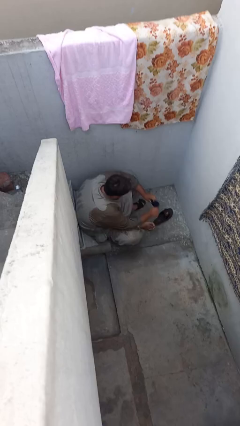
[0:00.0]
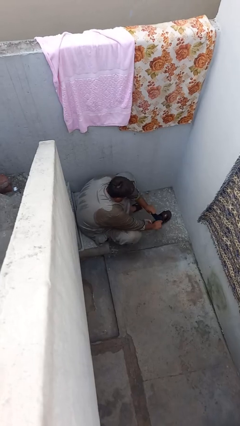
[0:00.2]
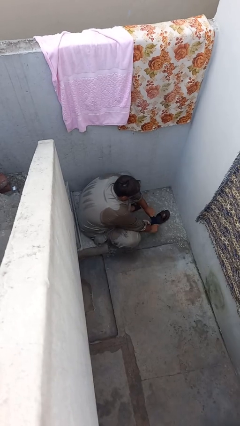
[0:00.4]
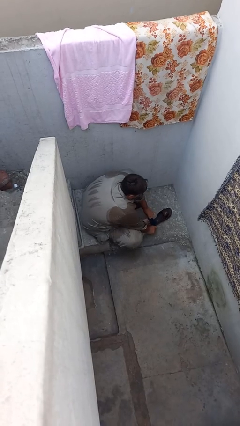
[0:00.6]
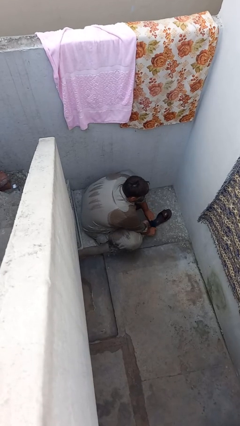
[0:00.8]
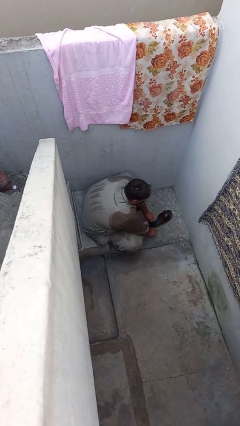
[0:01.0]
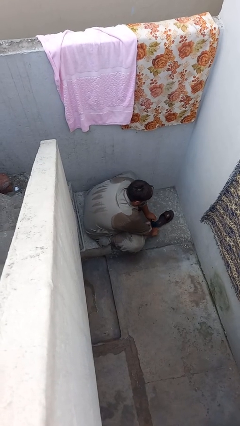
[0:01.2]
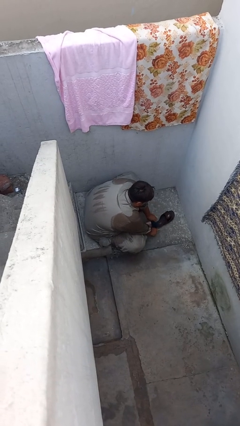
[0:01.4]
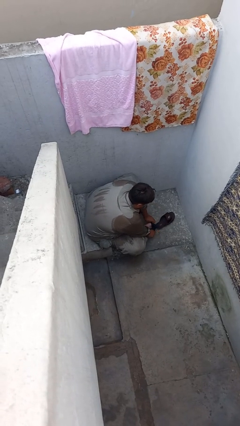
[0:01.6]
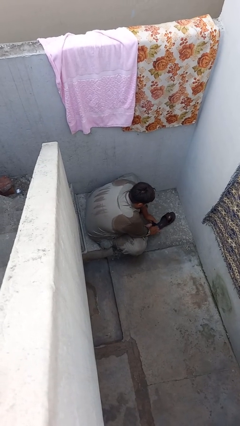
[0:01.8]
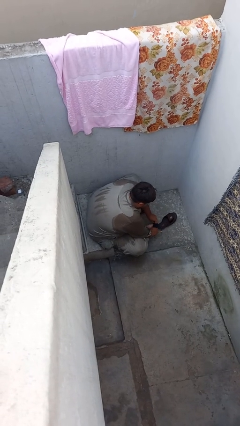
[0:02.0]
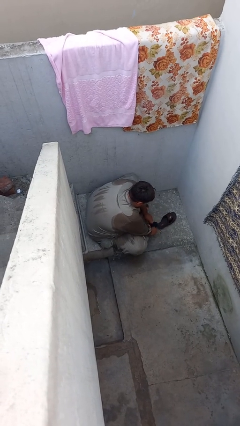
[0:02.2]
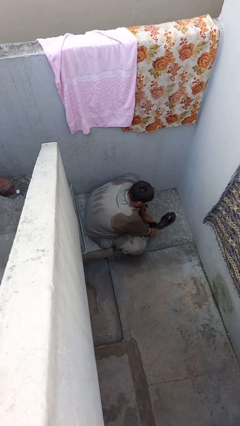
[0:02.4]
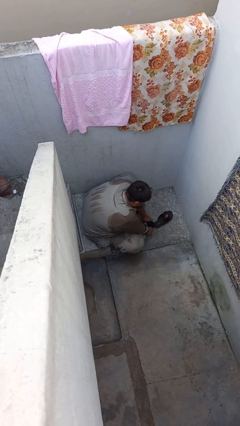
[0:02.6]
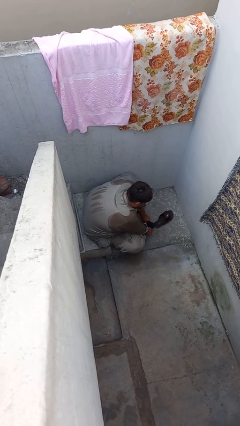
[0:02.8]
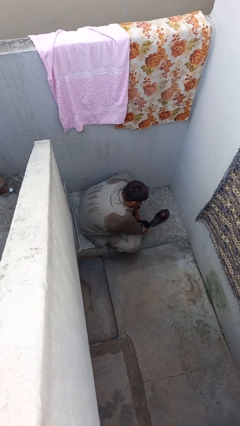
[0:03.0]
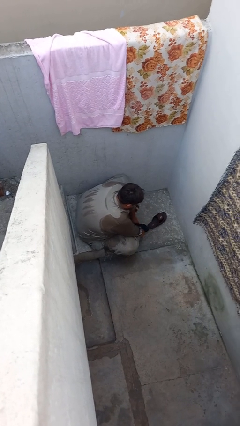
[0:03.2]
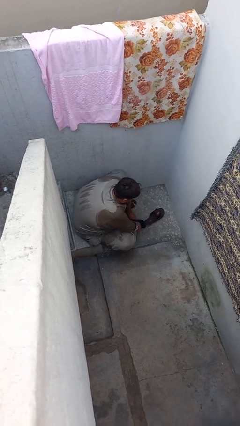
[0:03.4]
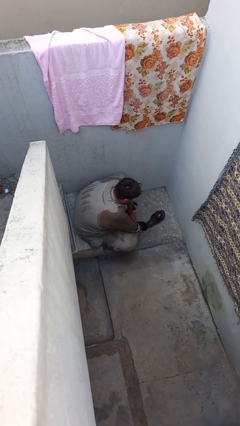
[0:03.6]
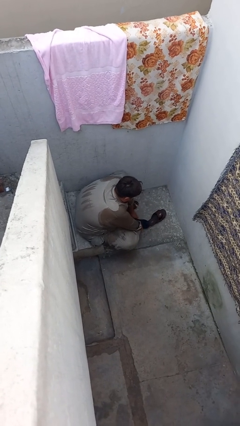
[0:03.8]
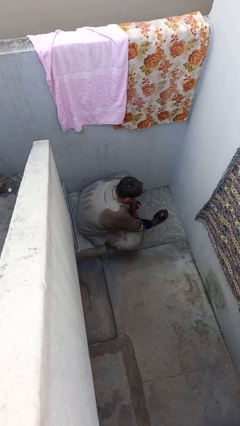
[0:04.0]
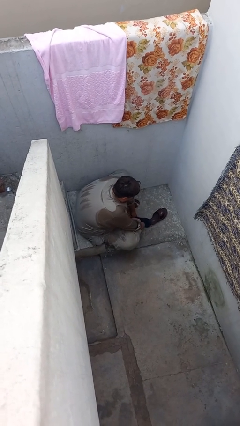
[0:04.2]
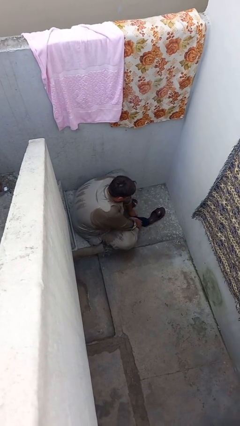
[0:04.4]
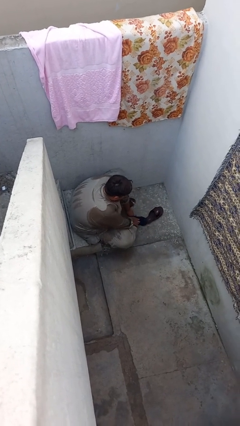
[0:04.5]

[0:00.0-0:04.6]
person puts on socks

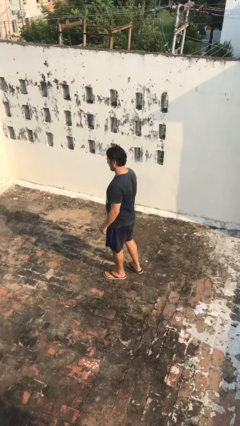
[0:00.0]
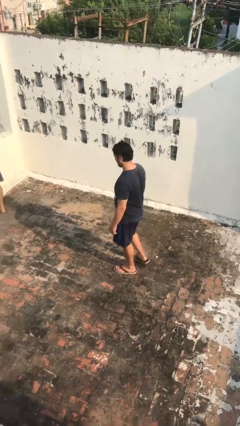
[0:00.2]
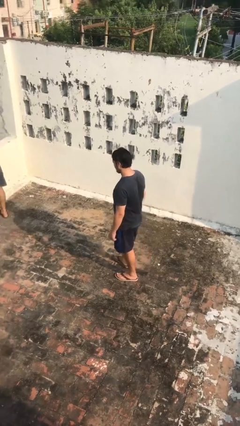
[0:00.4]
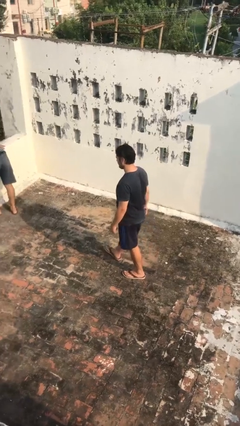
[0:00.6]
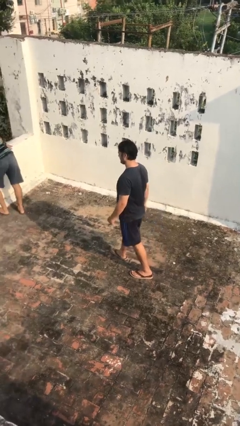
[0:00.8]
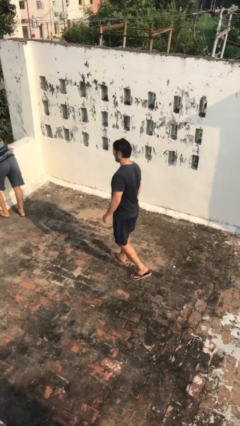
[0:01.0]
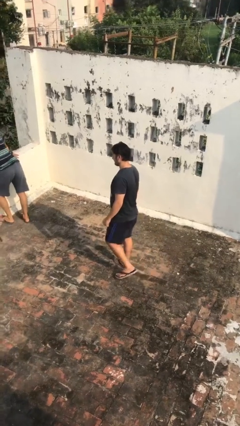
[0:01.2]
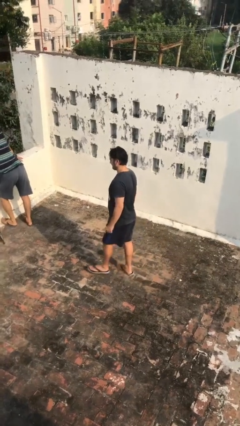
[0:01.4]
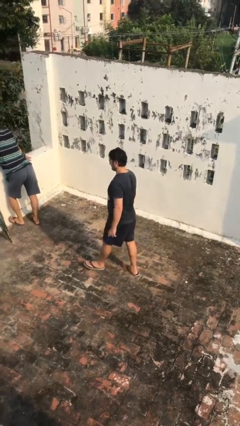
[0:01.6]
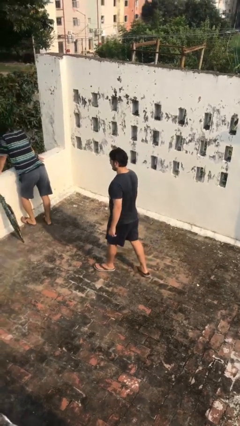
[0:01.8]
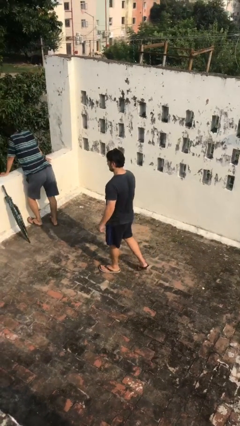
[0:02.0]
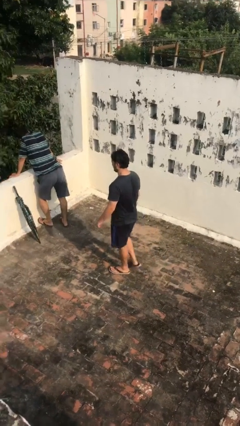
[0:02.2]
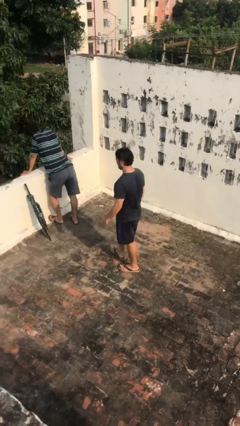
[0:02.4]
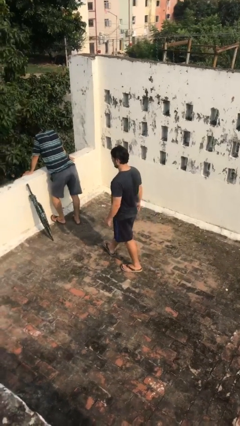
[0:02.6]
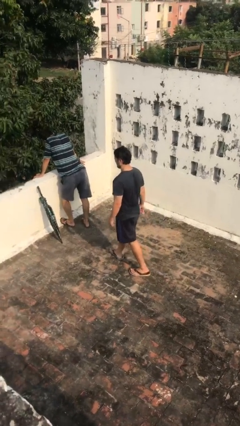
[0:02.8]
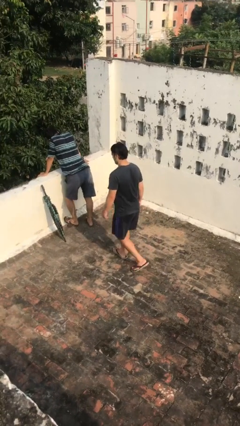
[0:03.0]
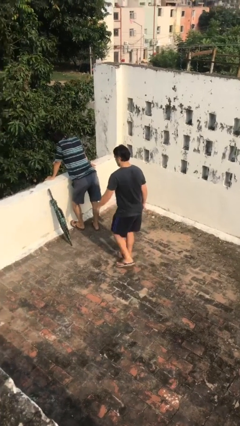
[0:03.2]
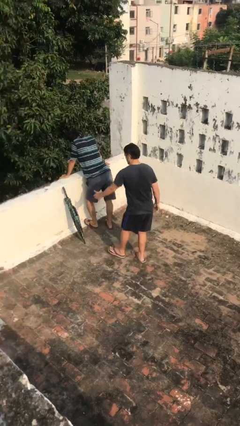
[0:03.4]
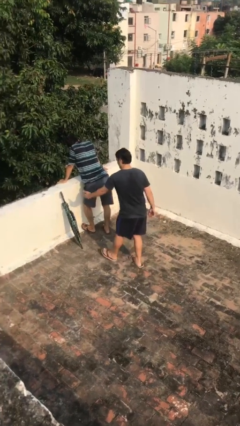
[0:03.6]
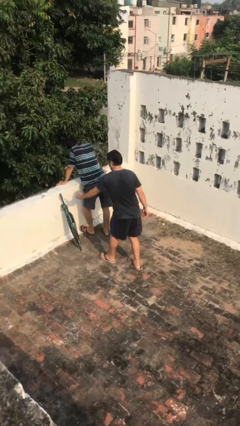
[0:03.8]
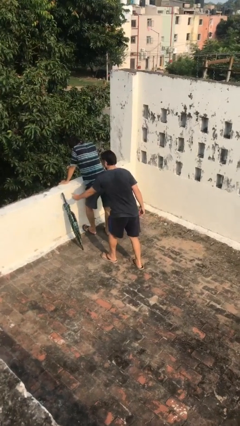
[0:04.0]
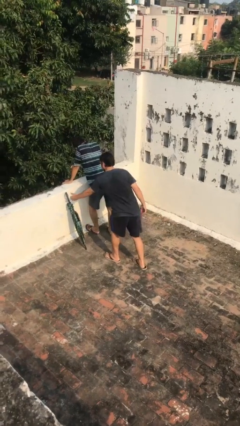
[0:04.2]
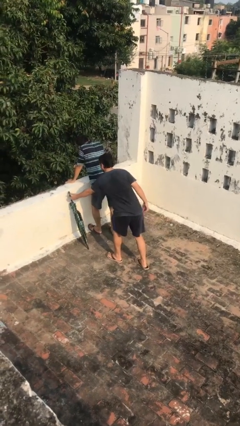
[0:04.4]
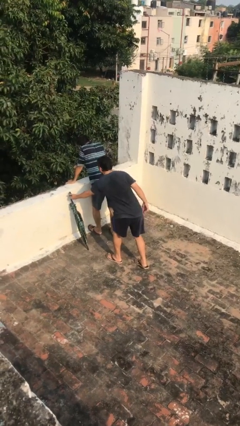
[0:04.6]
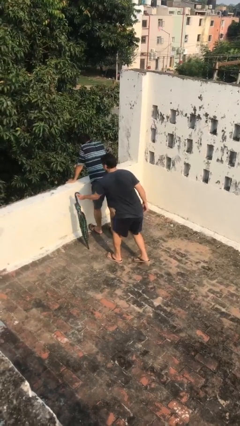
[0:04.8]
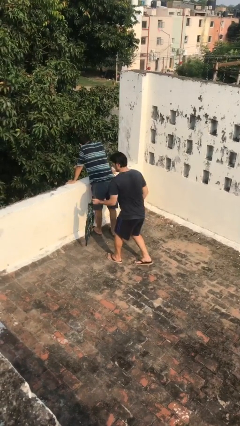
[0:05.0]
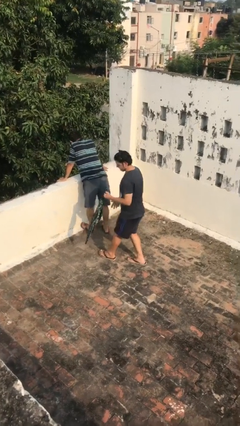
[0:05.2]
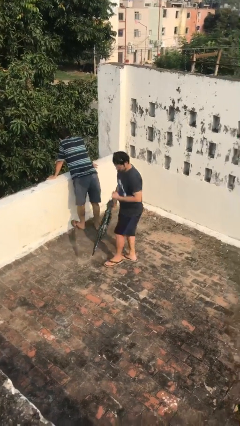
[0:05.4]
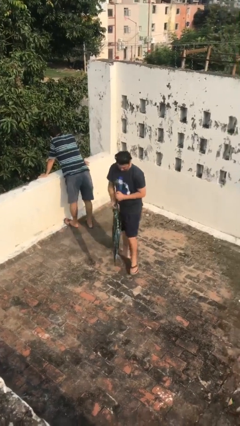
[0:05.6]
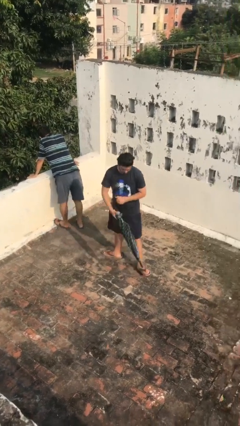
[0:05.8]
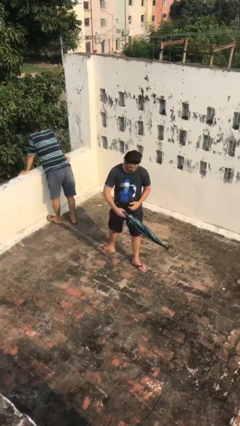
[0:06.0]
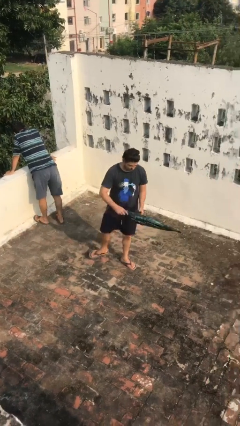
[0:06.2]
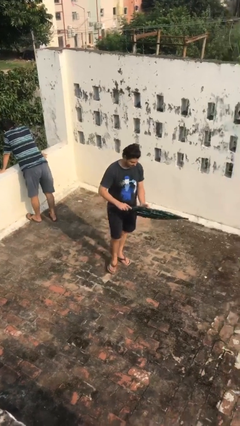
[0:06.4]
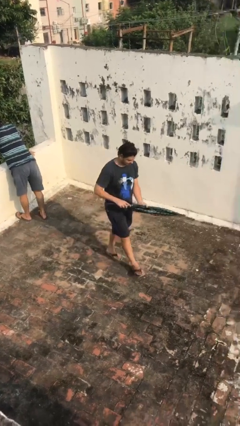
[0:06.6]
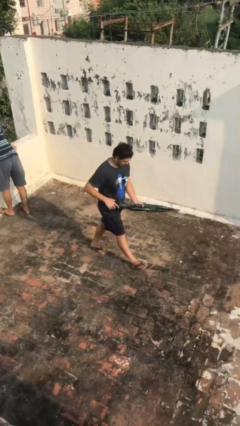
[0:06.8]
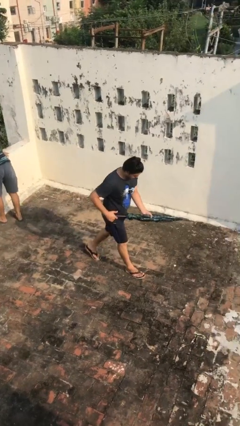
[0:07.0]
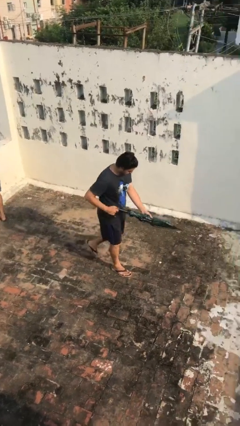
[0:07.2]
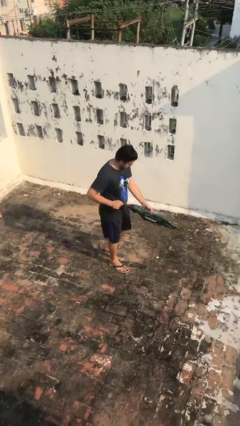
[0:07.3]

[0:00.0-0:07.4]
person steals object from person

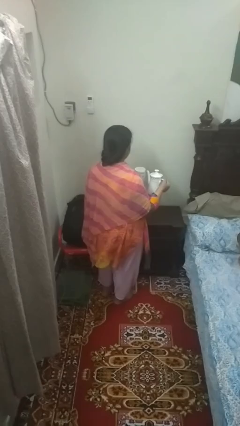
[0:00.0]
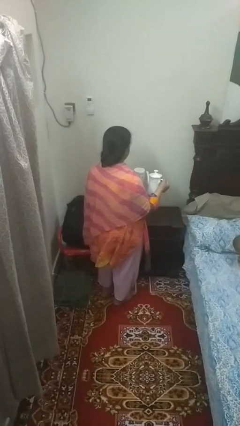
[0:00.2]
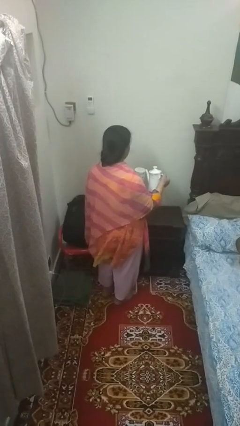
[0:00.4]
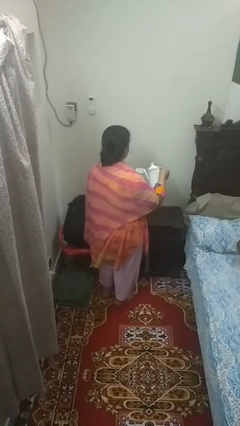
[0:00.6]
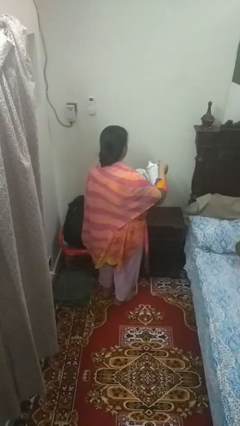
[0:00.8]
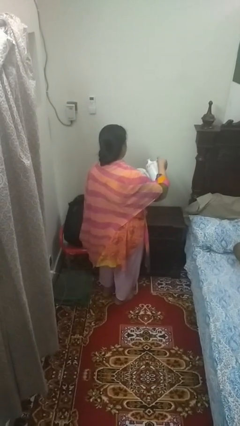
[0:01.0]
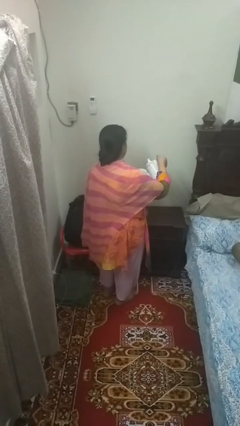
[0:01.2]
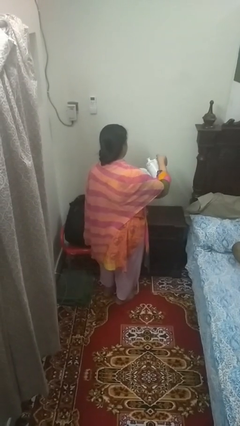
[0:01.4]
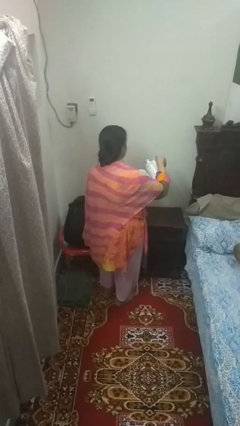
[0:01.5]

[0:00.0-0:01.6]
person pours coffee into mug

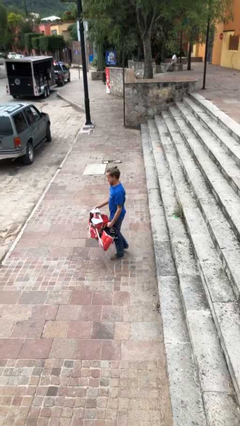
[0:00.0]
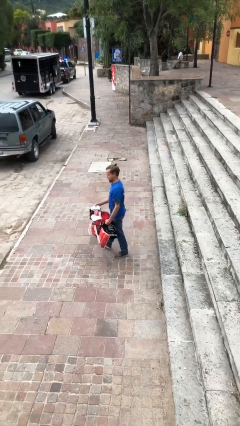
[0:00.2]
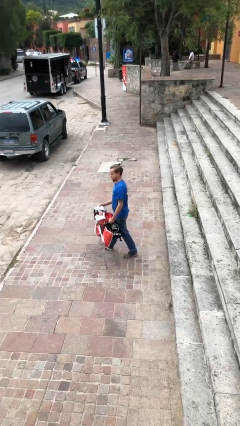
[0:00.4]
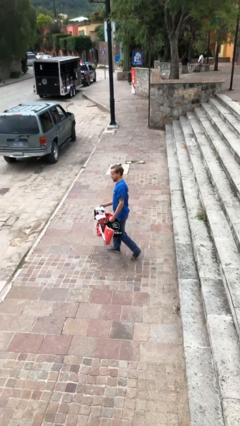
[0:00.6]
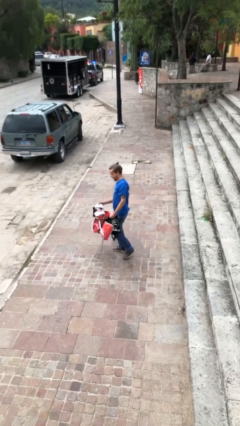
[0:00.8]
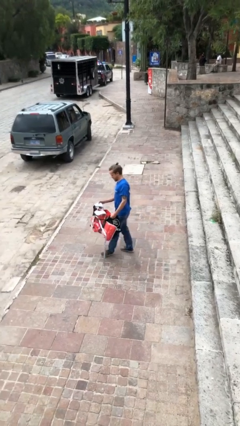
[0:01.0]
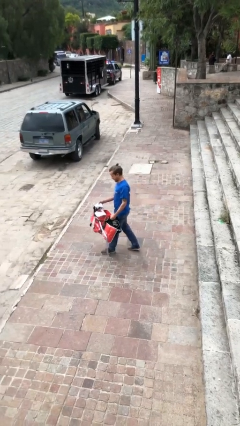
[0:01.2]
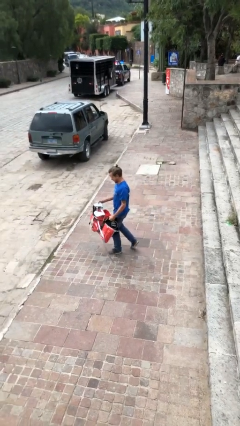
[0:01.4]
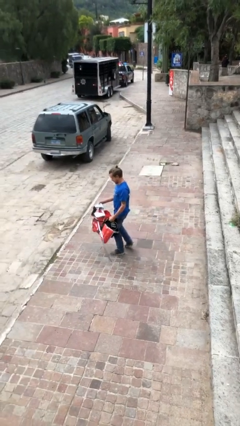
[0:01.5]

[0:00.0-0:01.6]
person carries heavy object

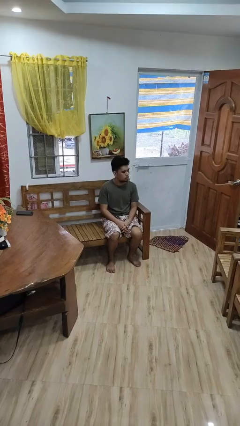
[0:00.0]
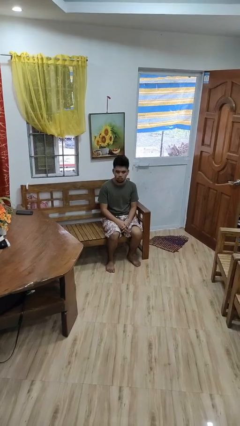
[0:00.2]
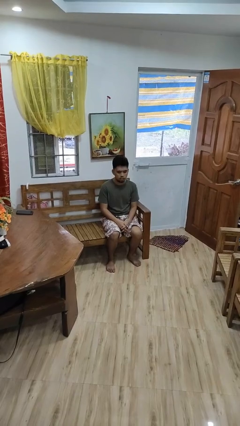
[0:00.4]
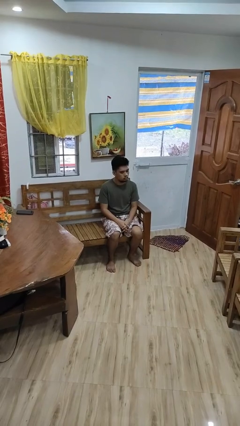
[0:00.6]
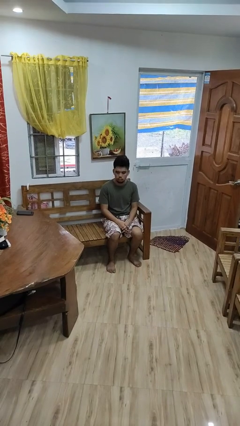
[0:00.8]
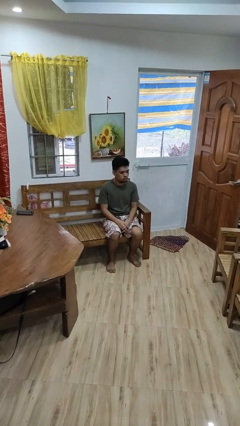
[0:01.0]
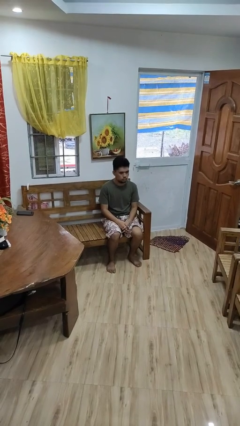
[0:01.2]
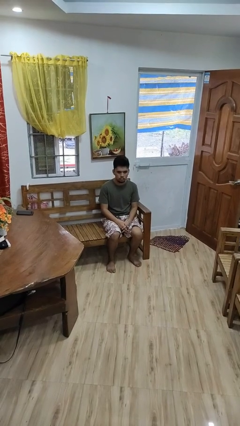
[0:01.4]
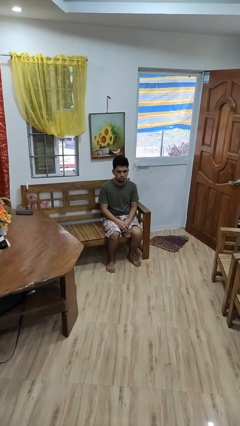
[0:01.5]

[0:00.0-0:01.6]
person shakes head

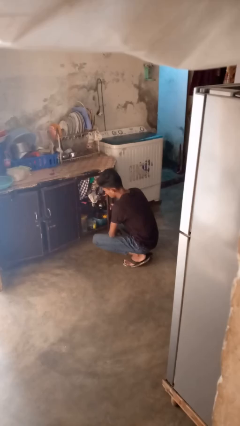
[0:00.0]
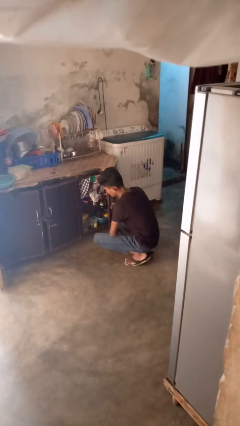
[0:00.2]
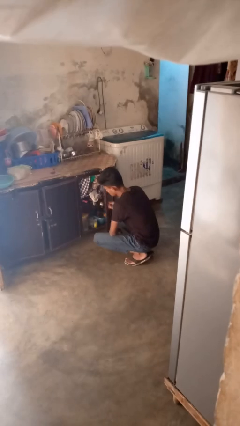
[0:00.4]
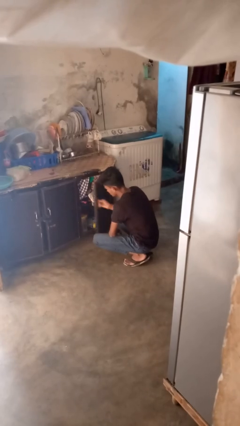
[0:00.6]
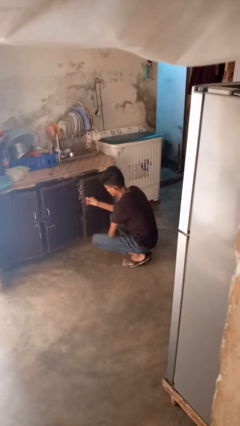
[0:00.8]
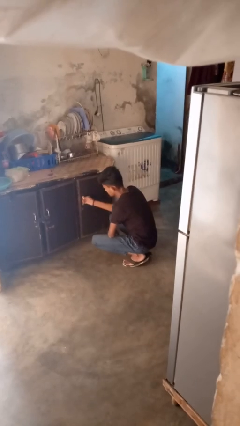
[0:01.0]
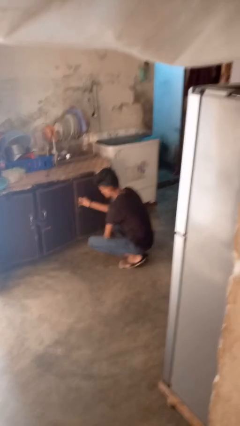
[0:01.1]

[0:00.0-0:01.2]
person closes cabinet
